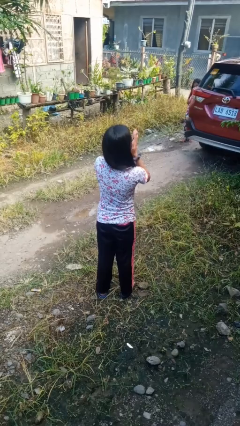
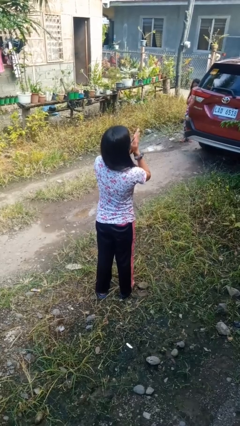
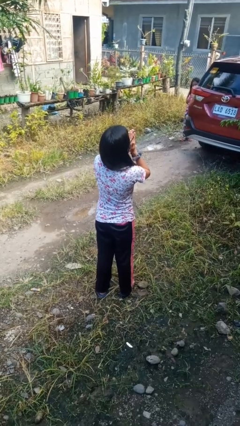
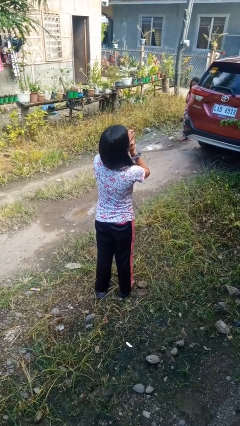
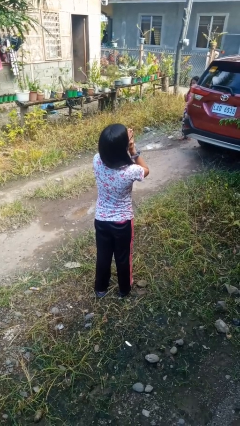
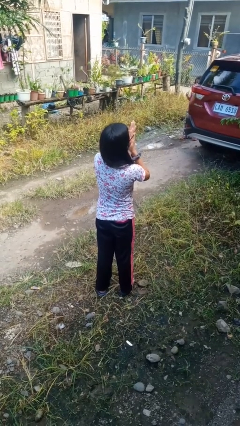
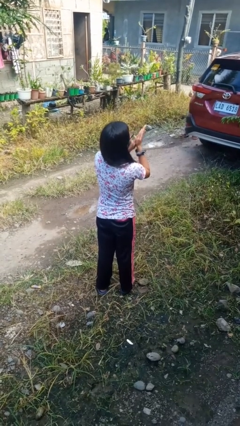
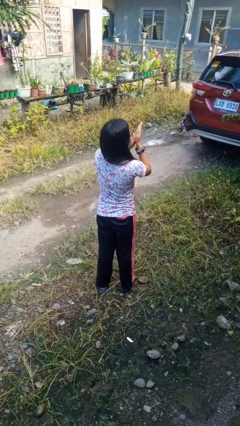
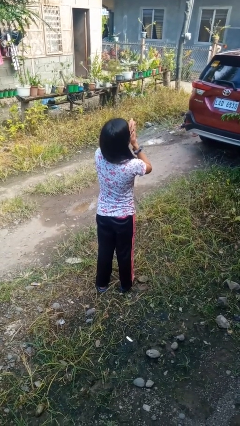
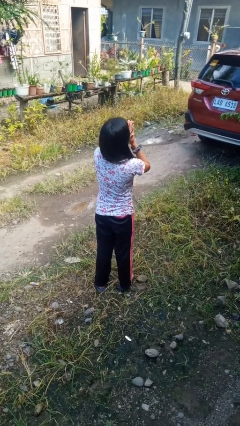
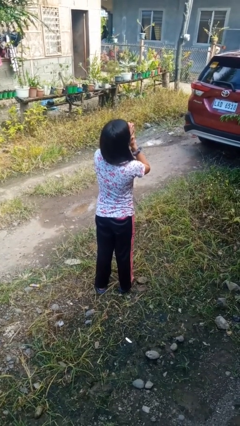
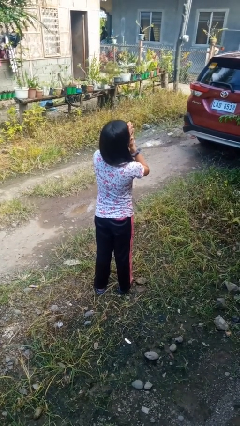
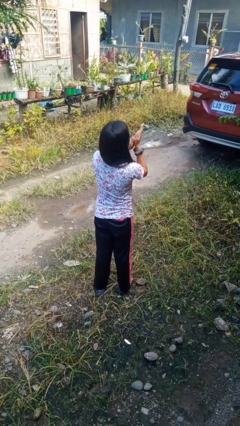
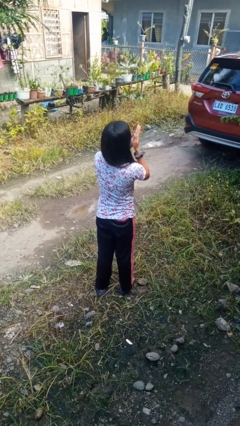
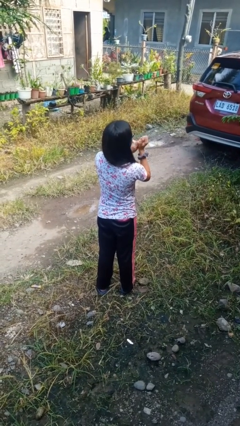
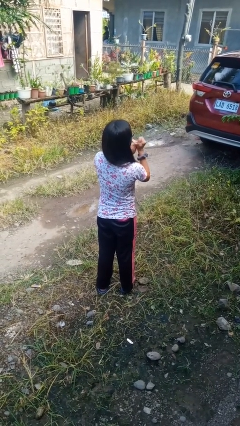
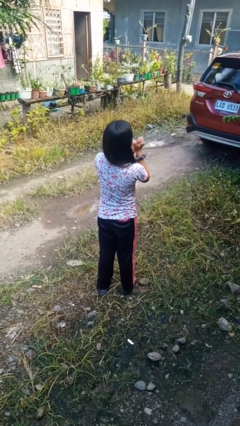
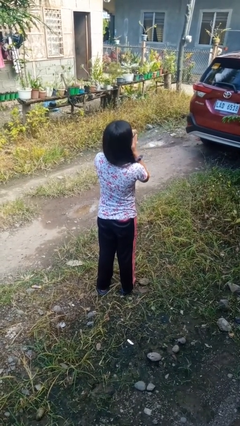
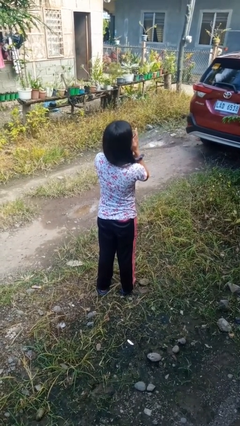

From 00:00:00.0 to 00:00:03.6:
person blows into hands

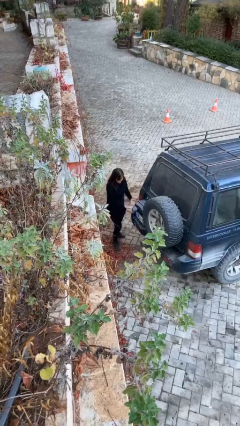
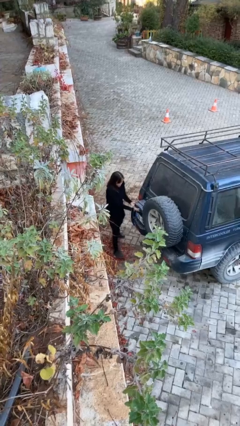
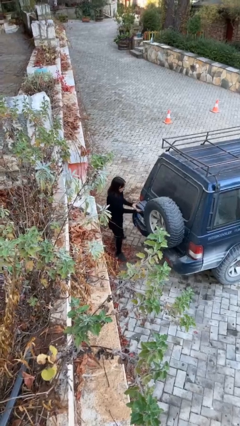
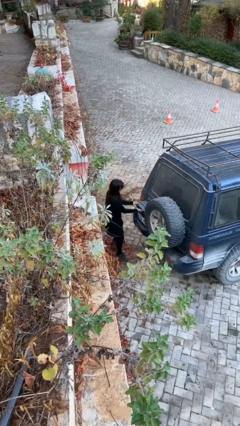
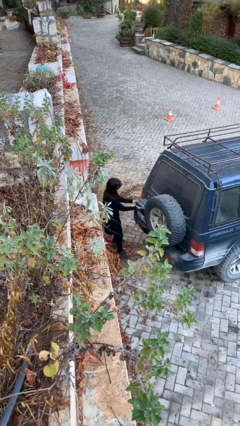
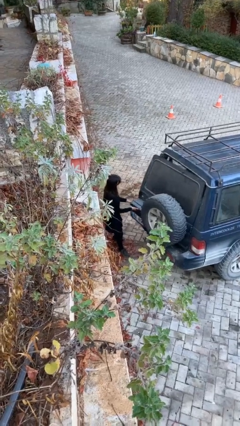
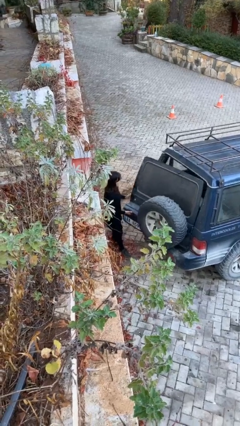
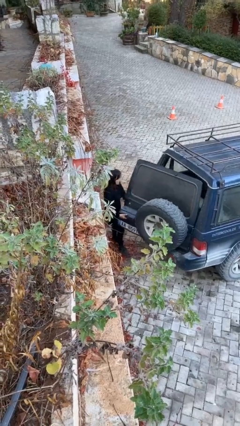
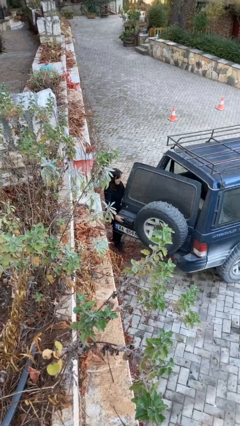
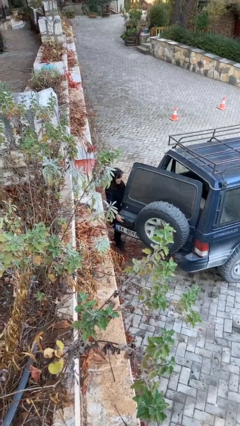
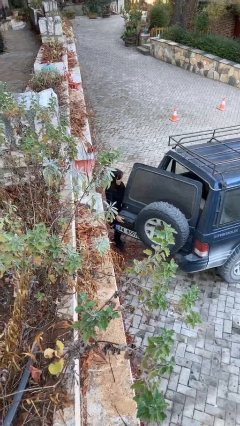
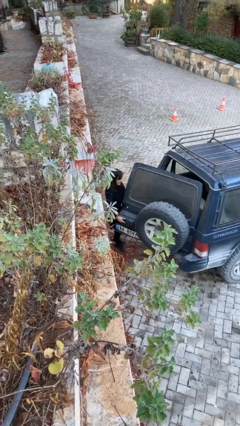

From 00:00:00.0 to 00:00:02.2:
person opens car trunk

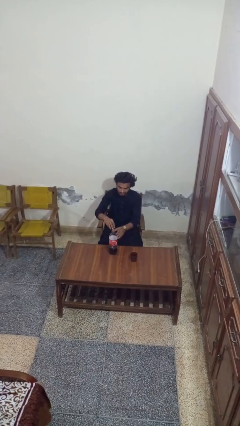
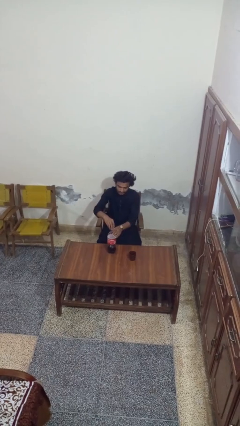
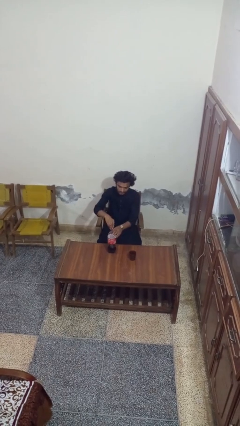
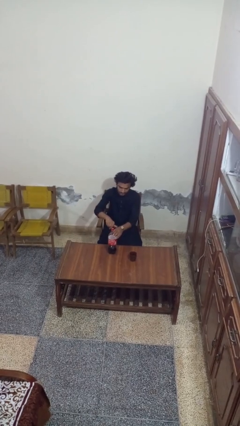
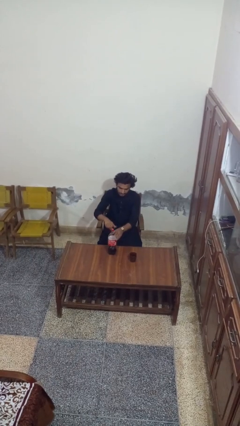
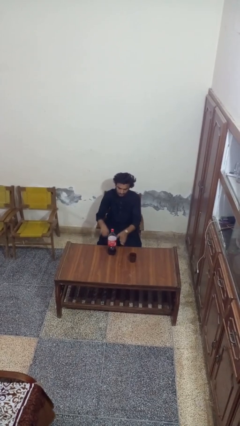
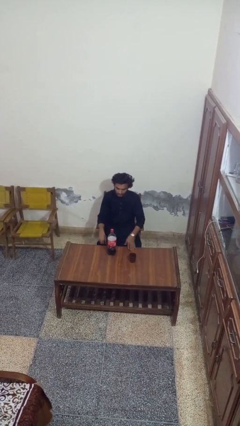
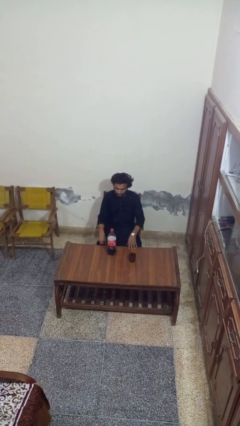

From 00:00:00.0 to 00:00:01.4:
person screws lid to bottle

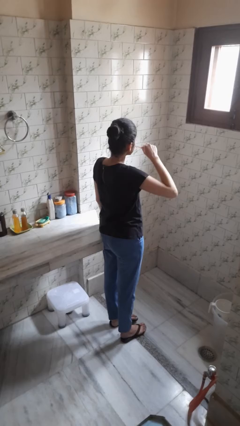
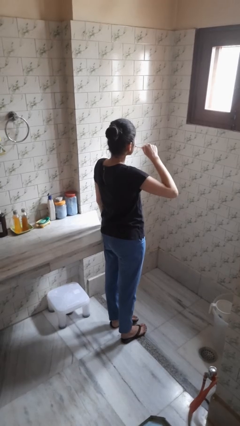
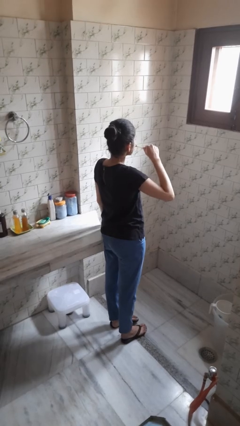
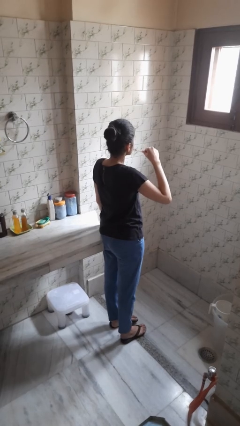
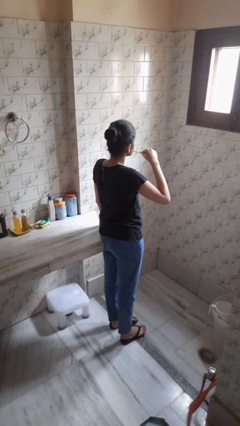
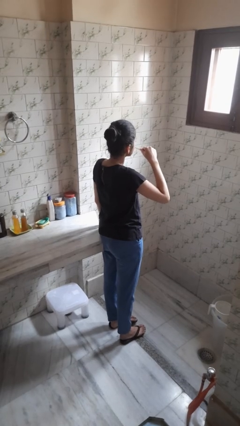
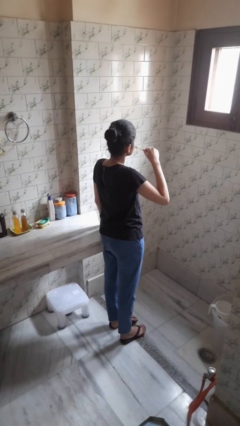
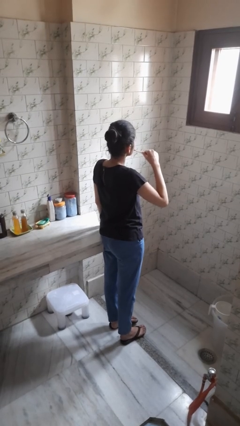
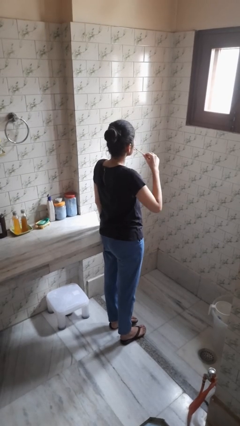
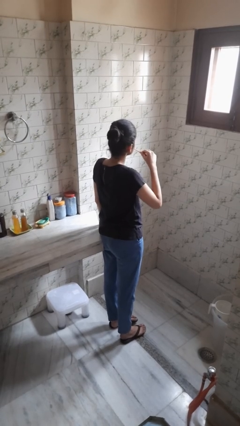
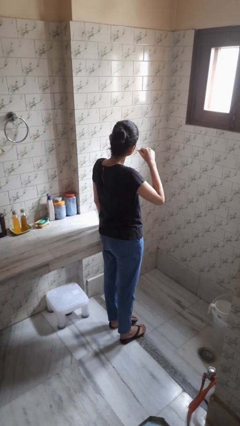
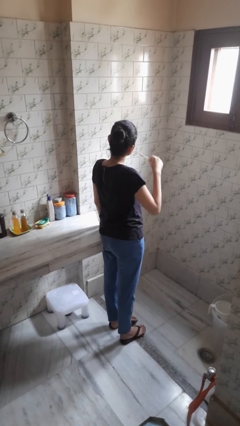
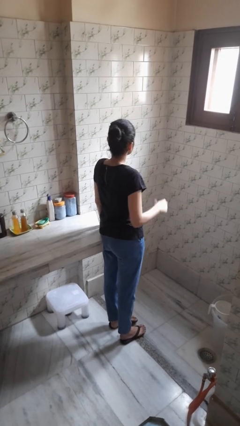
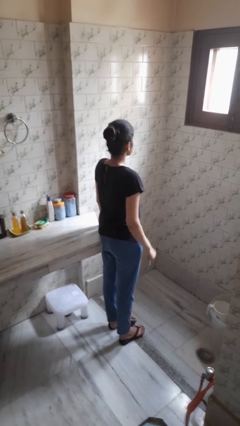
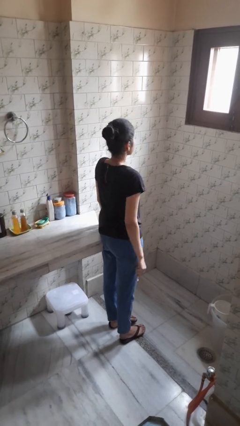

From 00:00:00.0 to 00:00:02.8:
person brushes teeth

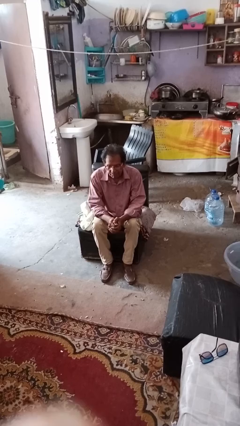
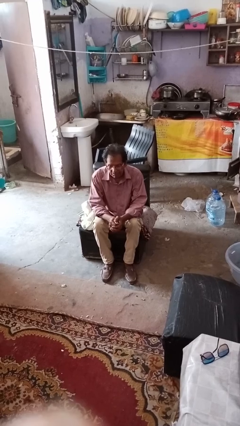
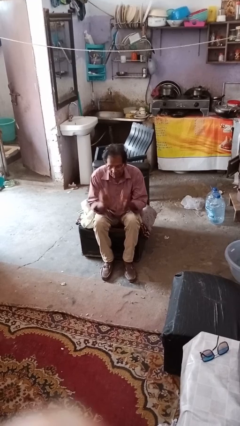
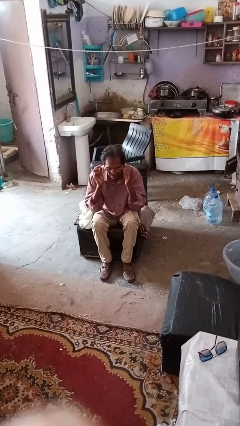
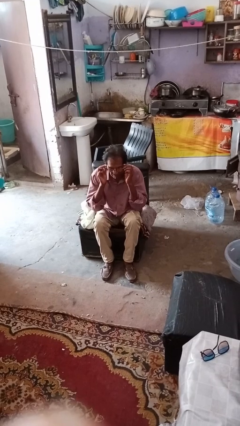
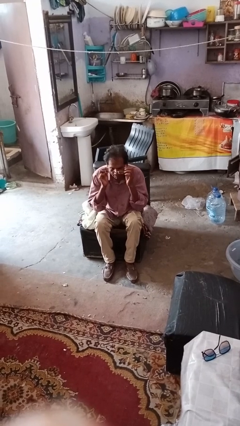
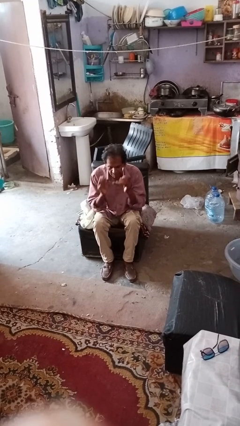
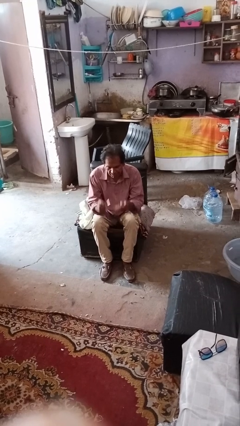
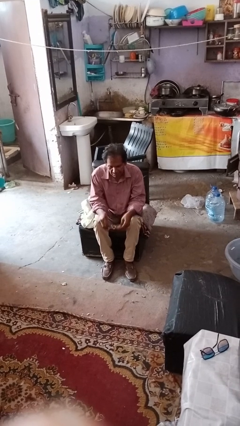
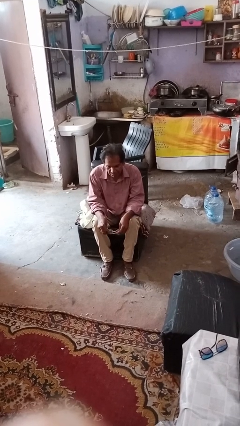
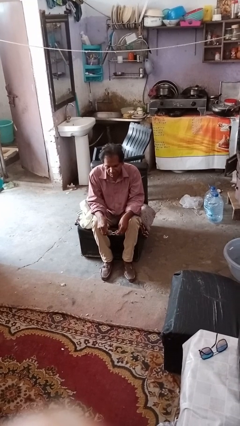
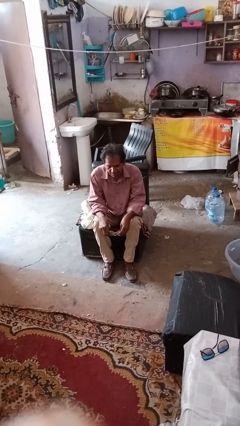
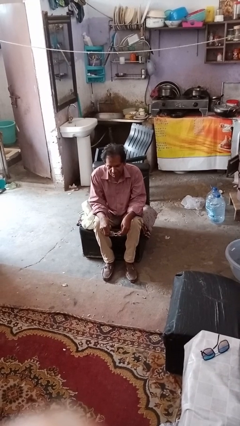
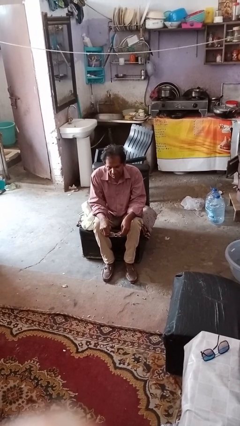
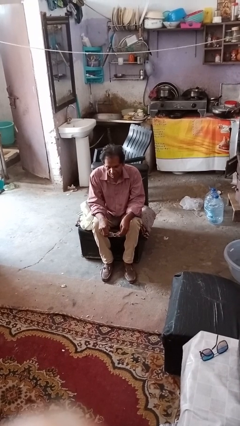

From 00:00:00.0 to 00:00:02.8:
person takes off glasses

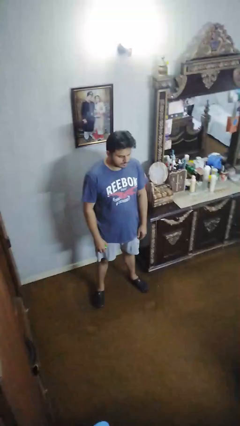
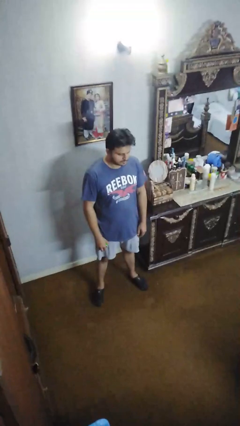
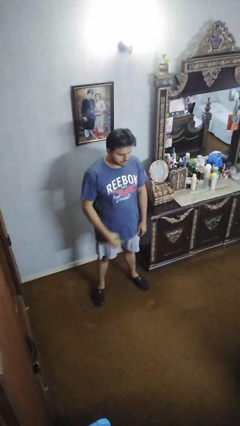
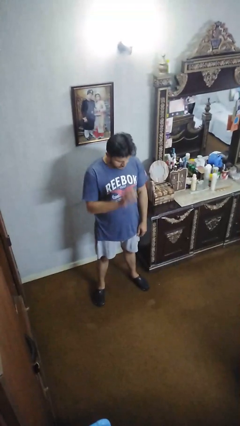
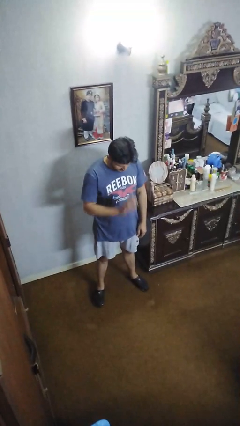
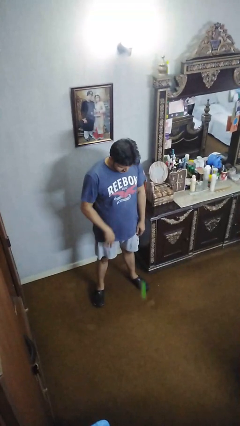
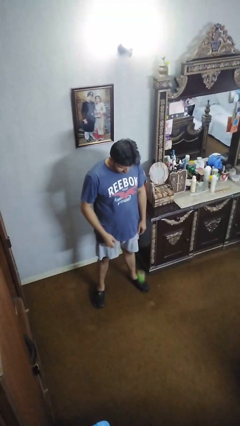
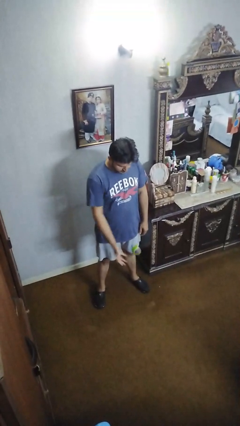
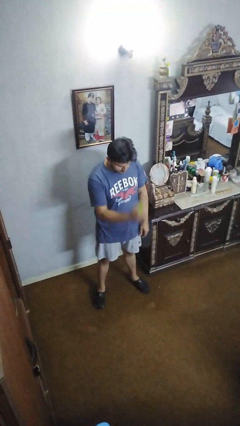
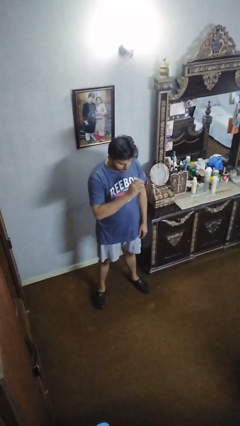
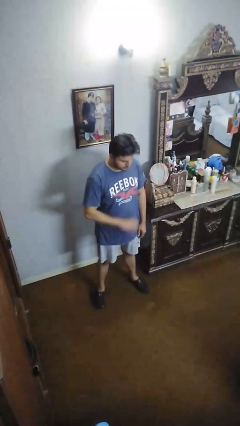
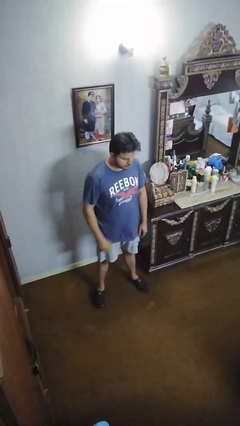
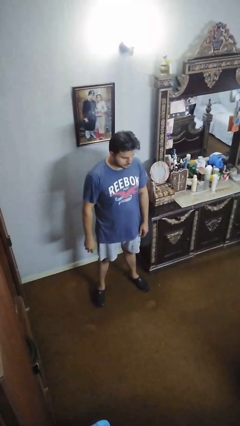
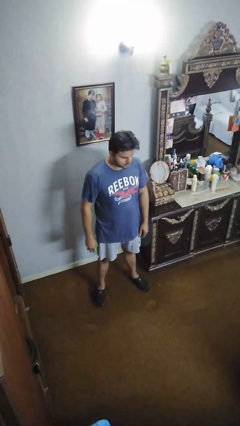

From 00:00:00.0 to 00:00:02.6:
person bounces ball on floor

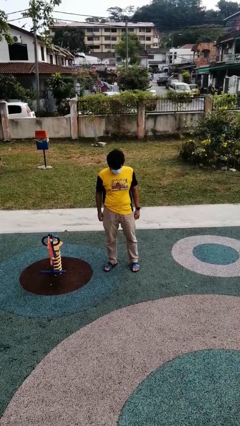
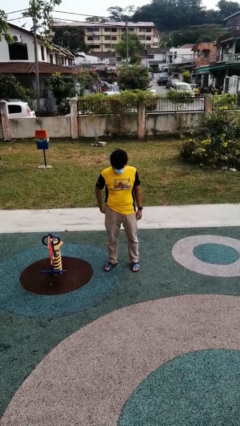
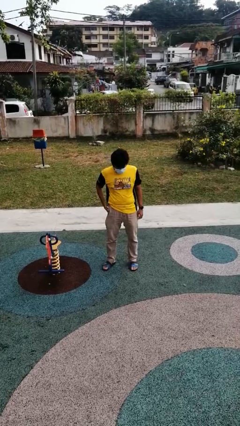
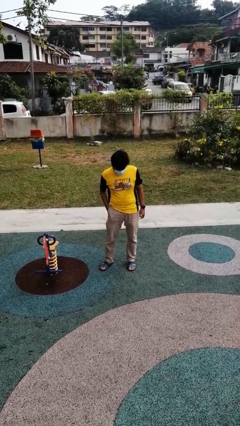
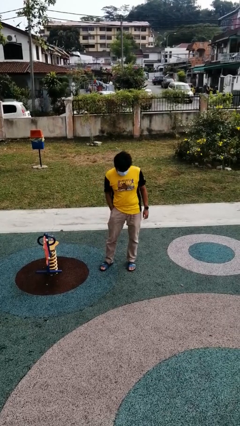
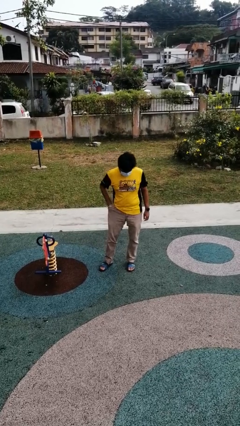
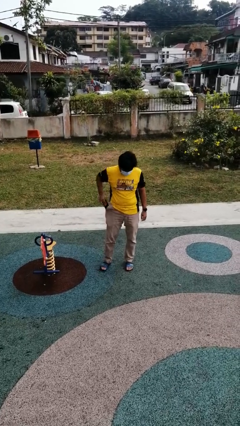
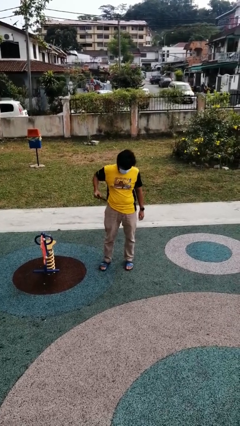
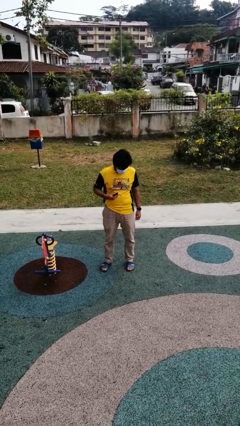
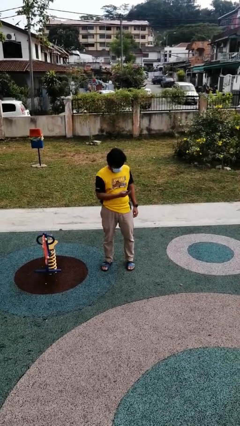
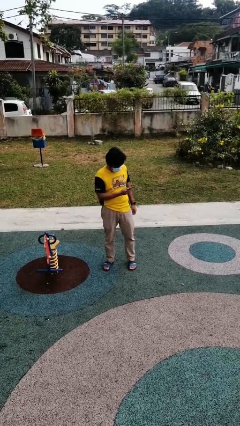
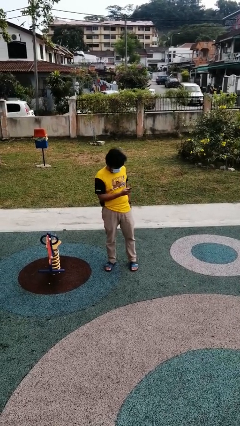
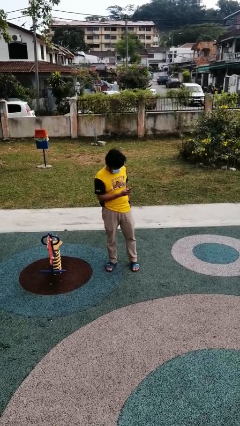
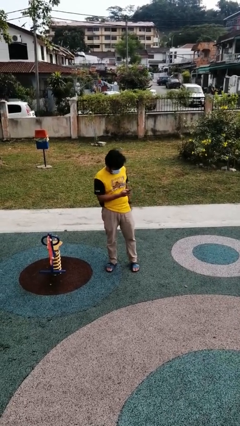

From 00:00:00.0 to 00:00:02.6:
person takes phone from pocket
